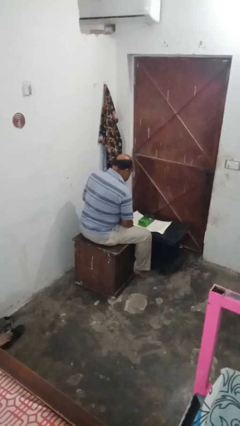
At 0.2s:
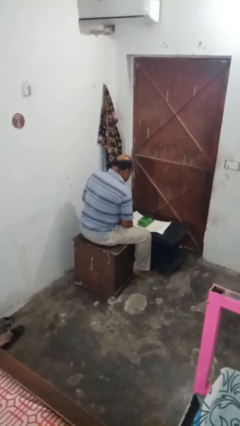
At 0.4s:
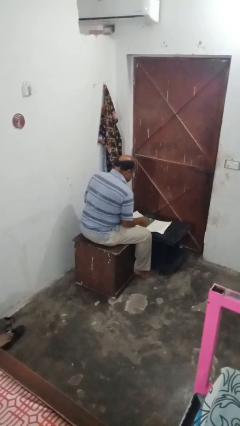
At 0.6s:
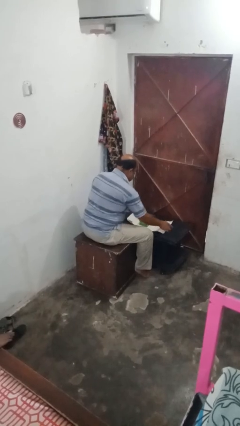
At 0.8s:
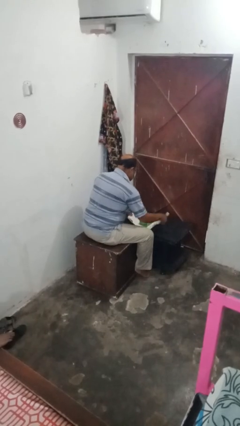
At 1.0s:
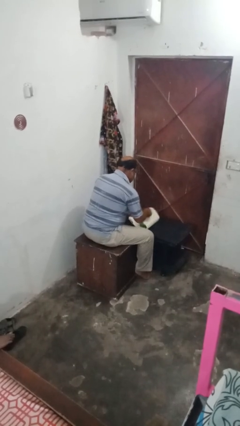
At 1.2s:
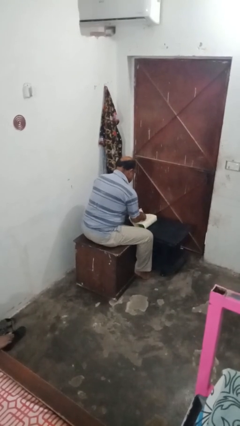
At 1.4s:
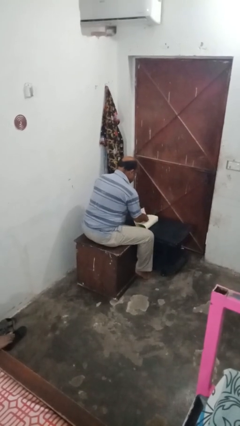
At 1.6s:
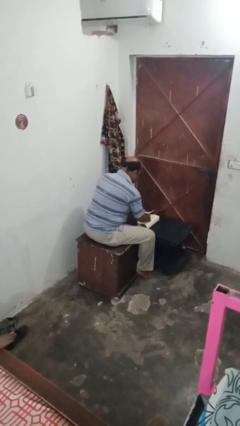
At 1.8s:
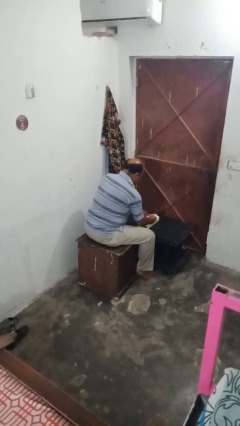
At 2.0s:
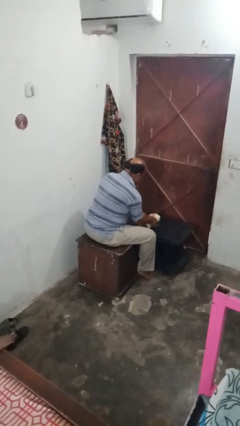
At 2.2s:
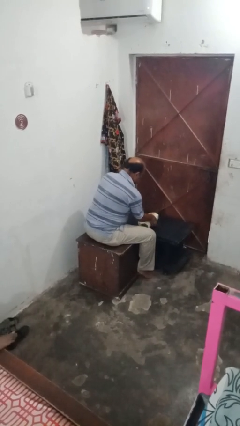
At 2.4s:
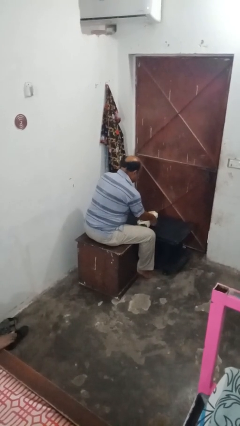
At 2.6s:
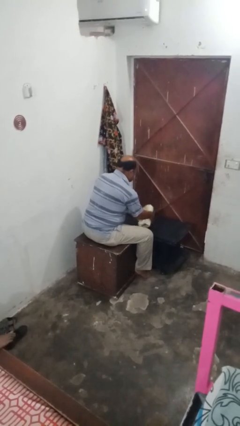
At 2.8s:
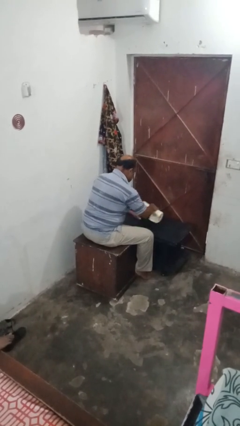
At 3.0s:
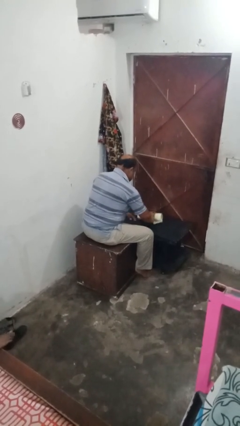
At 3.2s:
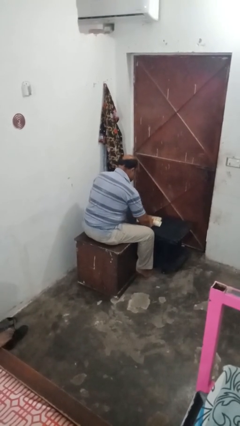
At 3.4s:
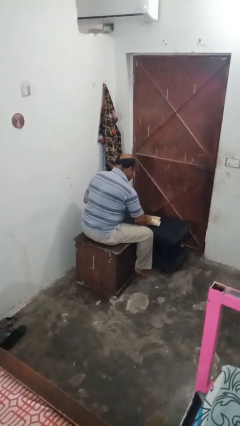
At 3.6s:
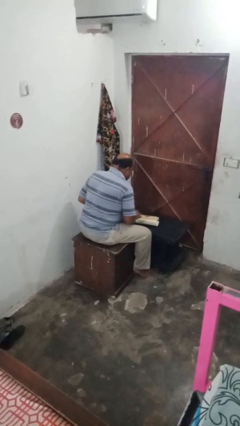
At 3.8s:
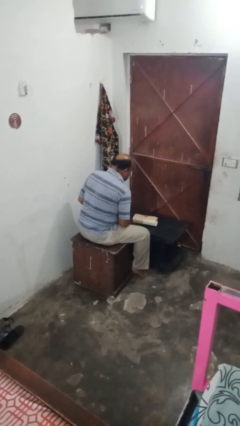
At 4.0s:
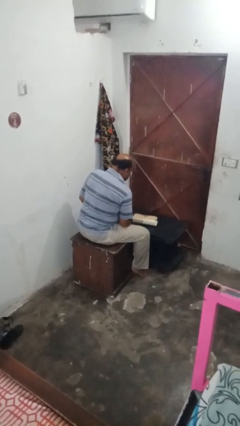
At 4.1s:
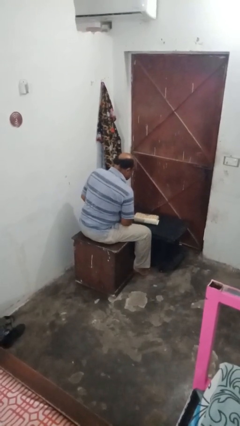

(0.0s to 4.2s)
person wraps box

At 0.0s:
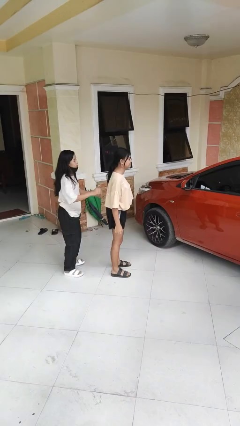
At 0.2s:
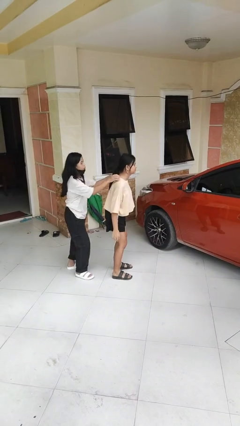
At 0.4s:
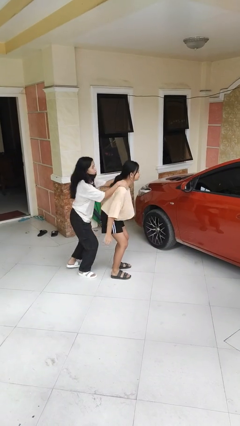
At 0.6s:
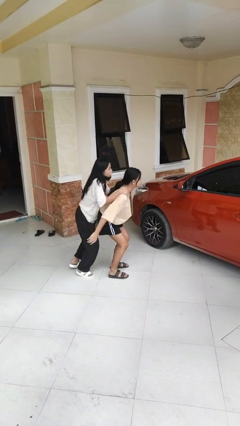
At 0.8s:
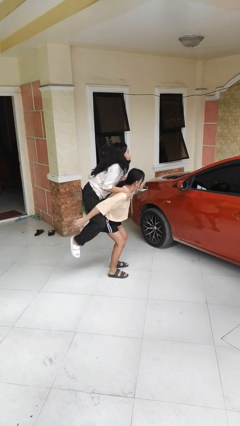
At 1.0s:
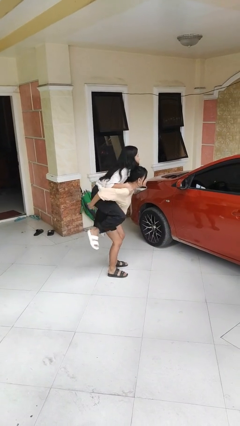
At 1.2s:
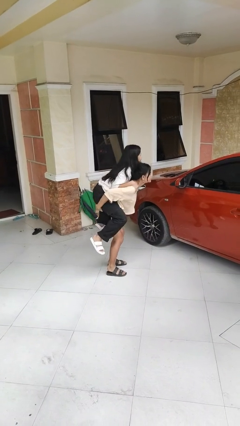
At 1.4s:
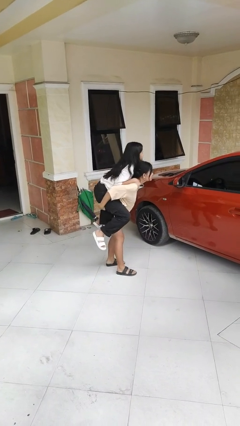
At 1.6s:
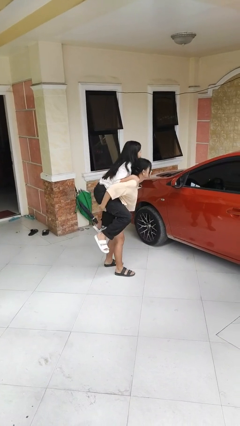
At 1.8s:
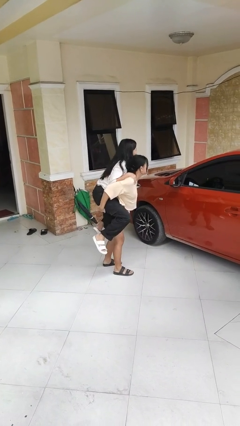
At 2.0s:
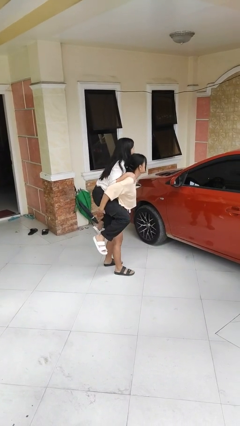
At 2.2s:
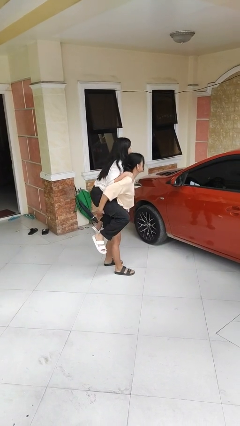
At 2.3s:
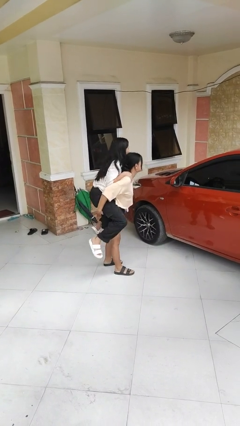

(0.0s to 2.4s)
person carries person over shoulder

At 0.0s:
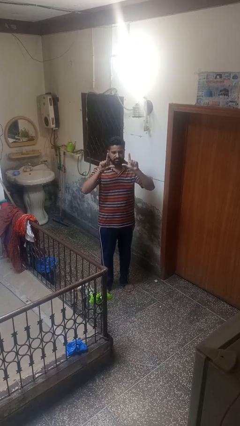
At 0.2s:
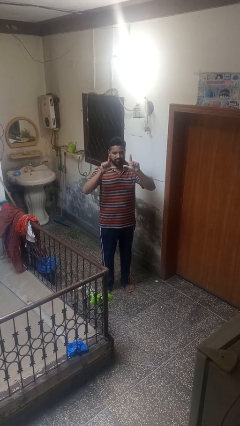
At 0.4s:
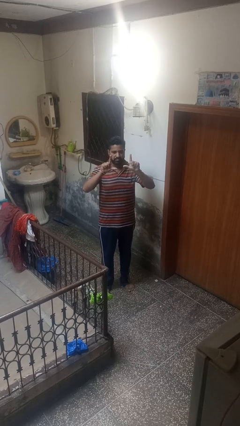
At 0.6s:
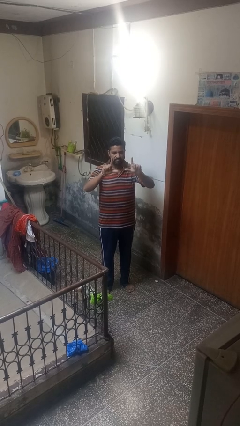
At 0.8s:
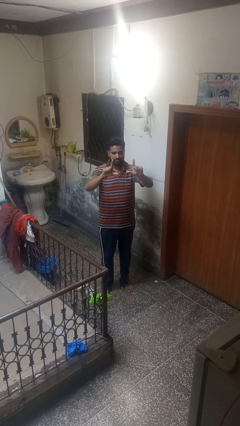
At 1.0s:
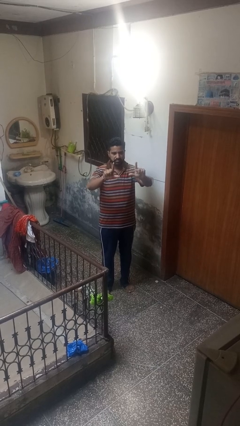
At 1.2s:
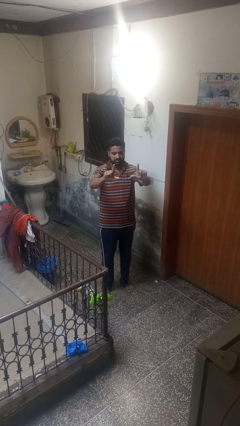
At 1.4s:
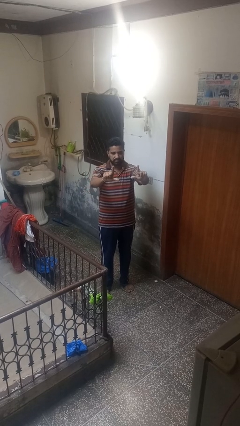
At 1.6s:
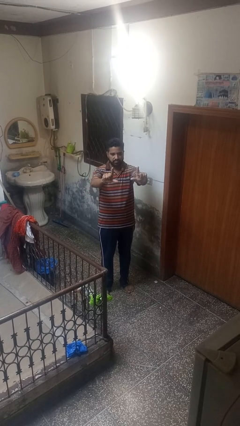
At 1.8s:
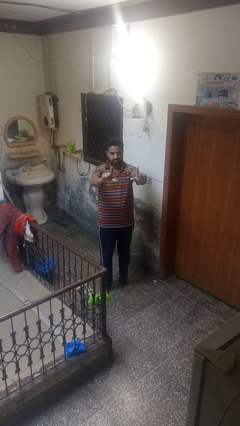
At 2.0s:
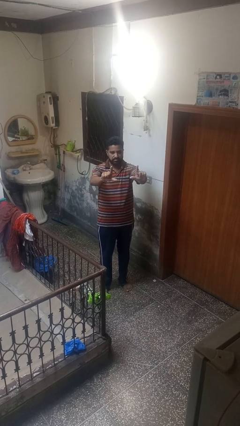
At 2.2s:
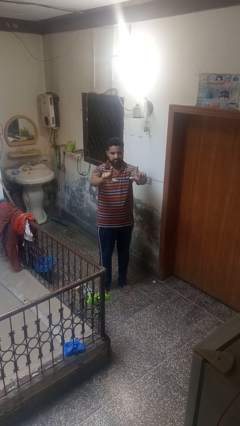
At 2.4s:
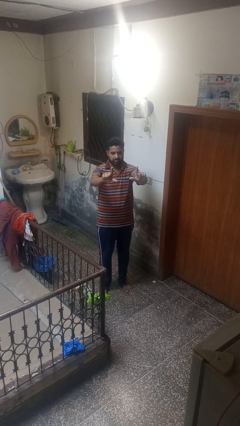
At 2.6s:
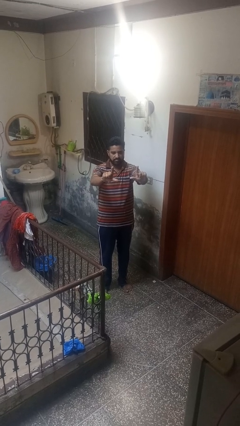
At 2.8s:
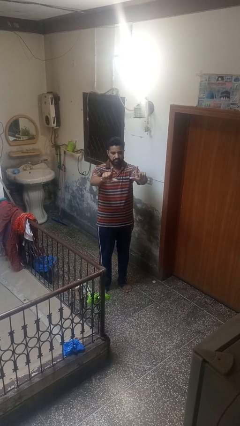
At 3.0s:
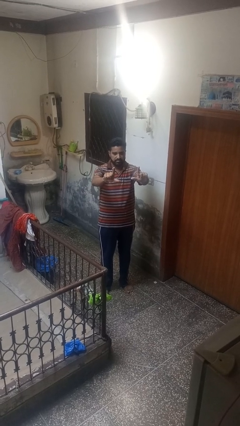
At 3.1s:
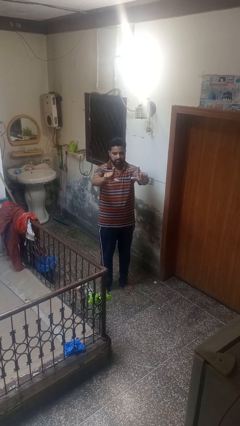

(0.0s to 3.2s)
person gestures zoom out

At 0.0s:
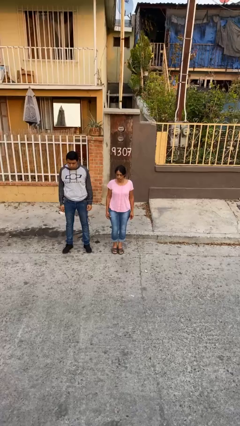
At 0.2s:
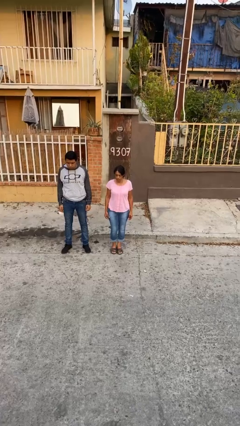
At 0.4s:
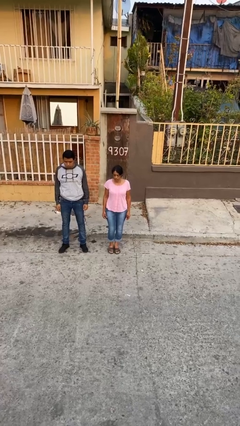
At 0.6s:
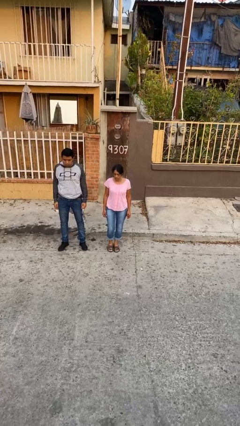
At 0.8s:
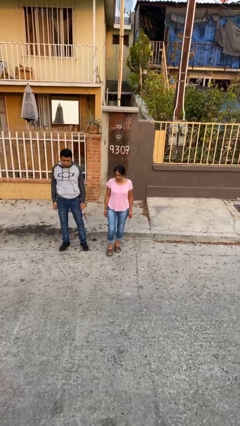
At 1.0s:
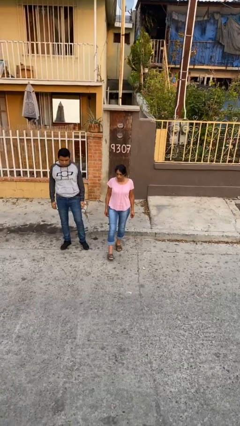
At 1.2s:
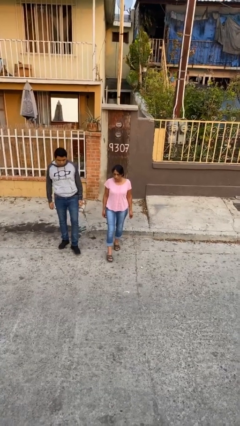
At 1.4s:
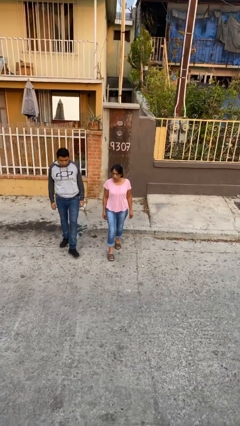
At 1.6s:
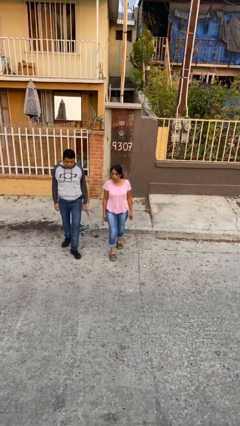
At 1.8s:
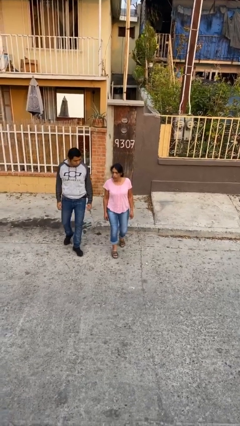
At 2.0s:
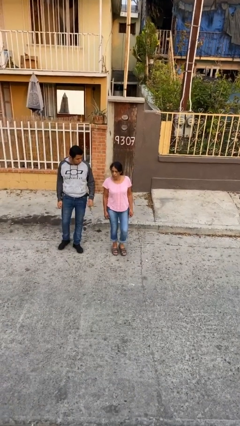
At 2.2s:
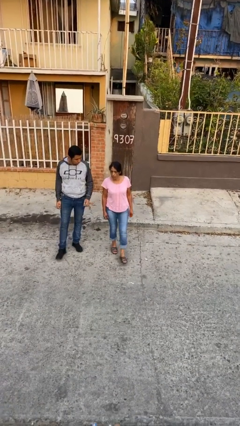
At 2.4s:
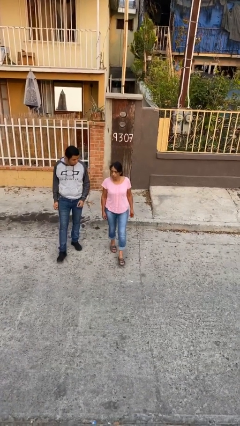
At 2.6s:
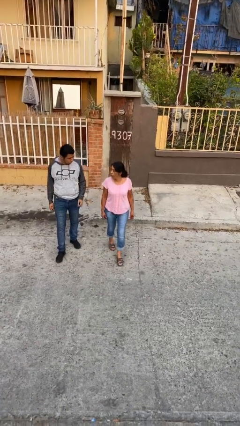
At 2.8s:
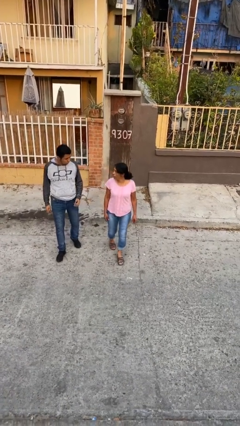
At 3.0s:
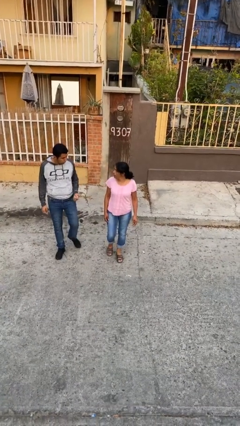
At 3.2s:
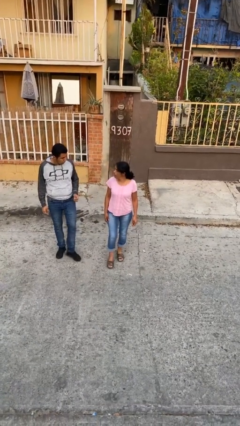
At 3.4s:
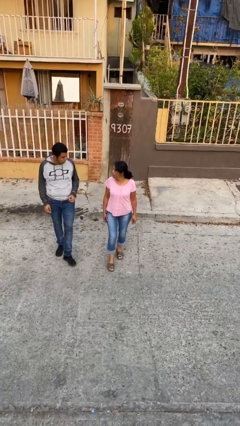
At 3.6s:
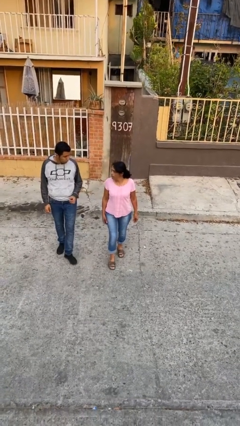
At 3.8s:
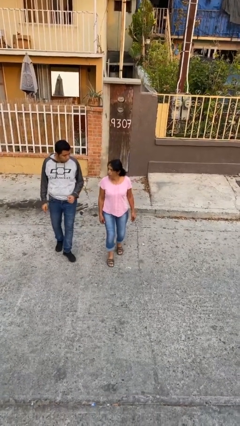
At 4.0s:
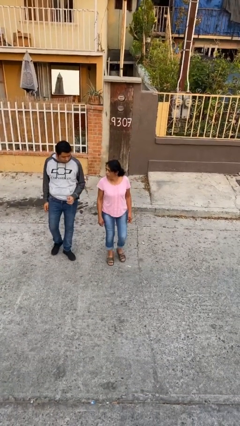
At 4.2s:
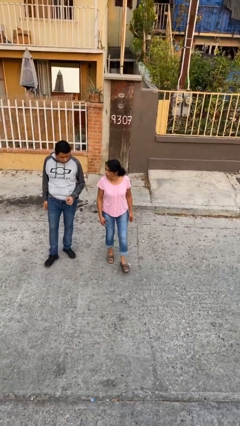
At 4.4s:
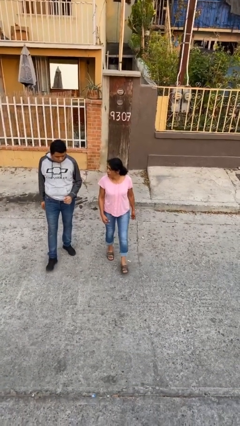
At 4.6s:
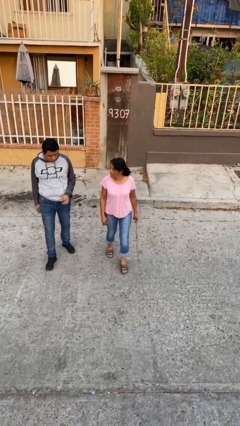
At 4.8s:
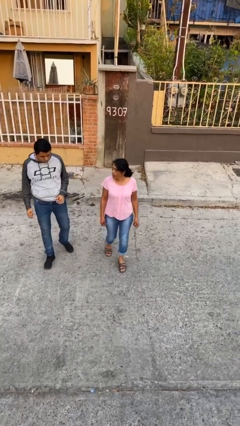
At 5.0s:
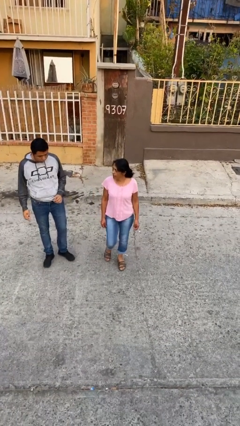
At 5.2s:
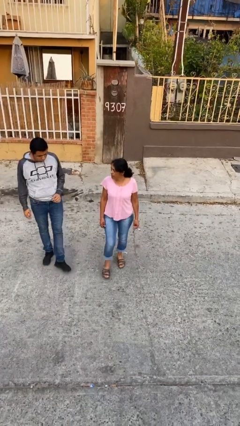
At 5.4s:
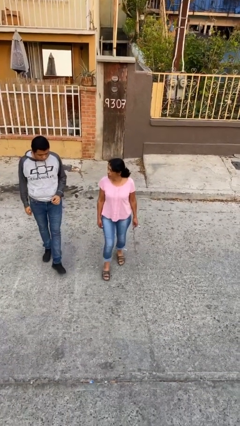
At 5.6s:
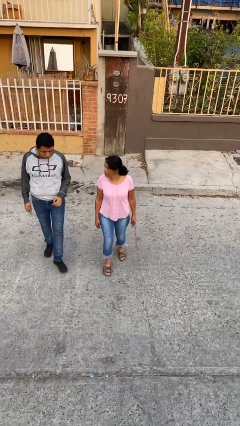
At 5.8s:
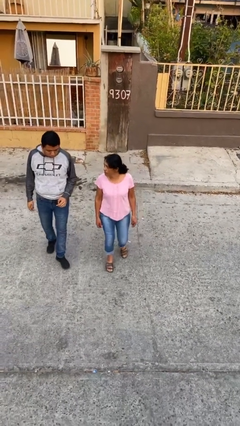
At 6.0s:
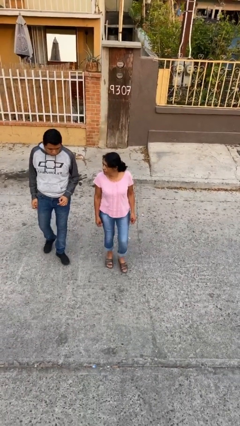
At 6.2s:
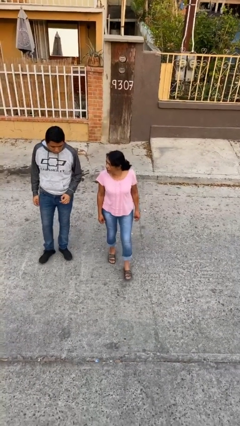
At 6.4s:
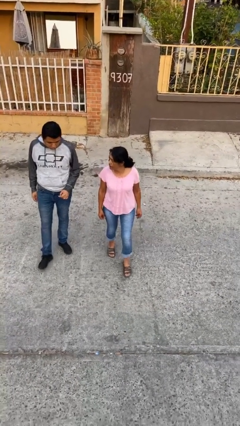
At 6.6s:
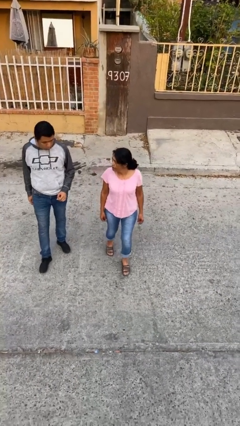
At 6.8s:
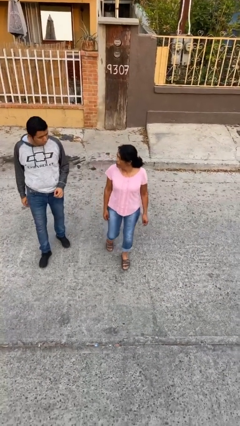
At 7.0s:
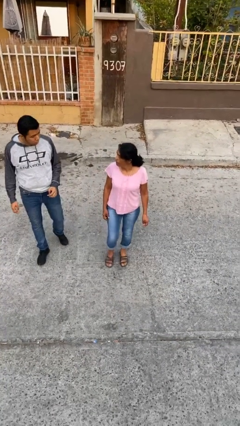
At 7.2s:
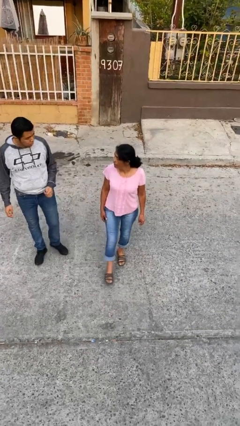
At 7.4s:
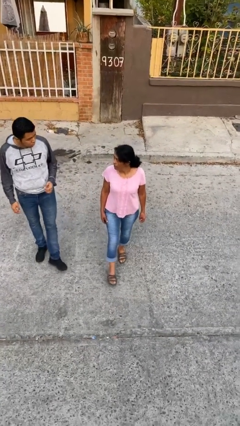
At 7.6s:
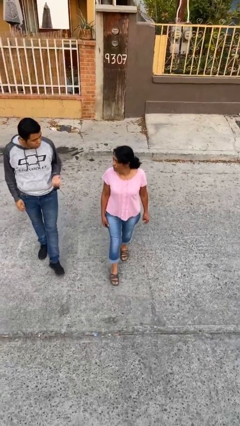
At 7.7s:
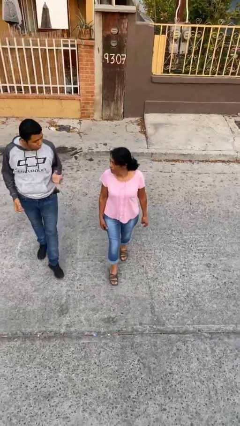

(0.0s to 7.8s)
person talks to person
